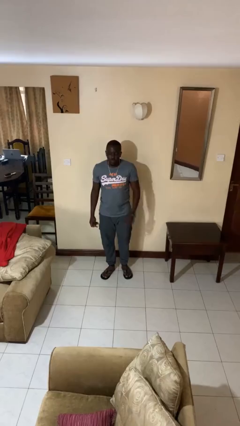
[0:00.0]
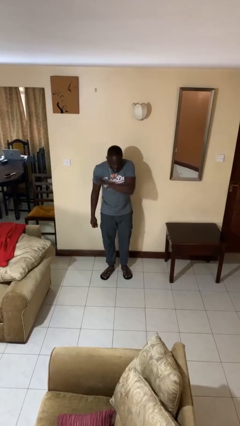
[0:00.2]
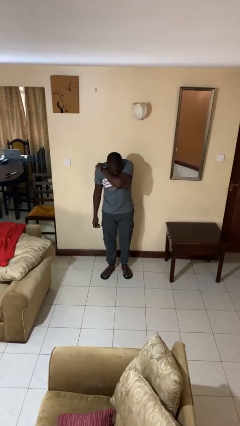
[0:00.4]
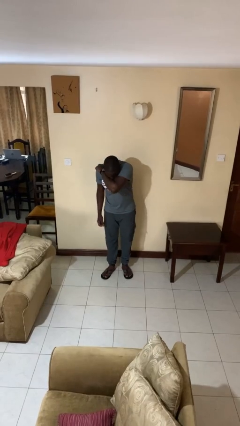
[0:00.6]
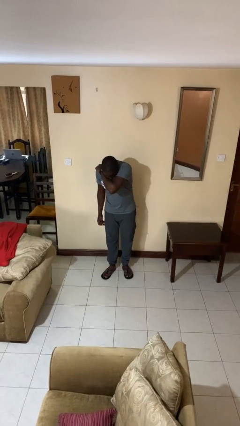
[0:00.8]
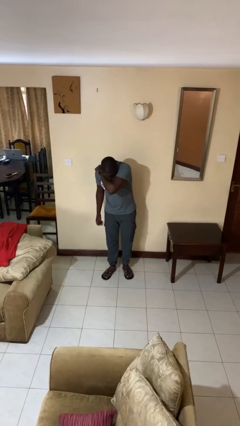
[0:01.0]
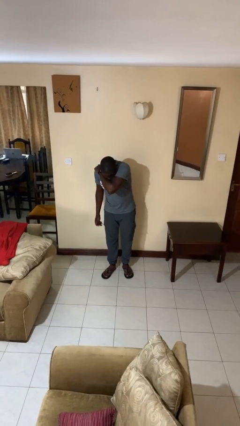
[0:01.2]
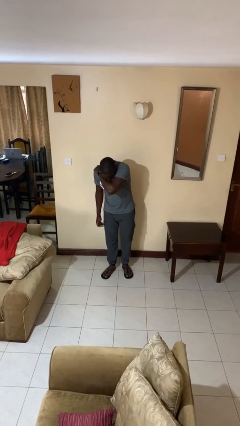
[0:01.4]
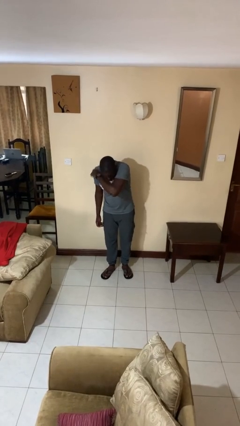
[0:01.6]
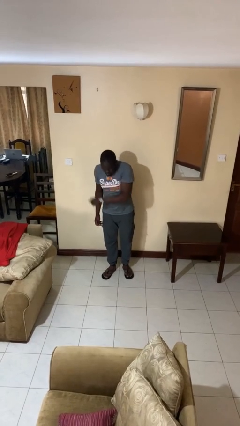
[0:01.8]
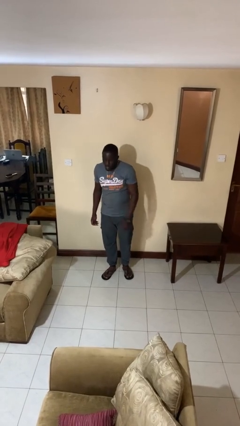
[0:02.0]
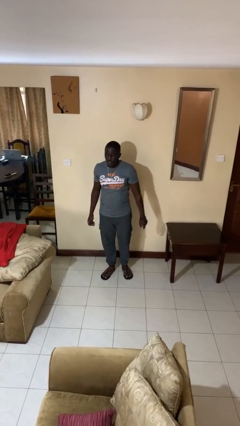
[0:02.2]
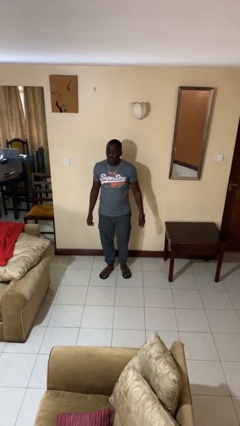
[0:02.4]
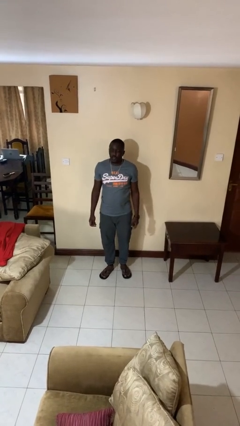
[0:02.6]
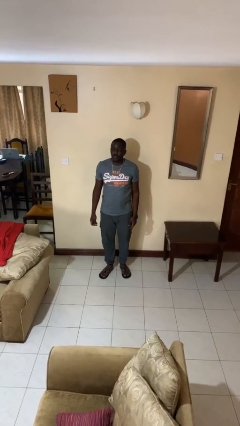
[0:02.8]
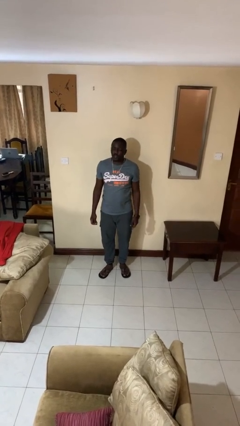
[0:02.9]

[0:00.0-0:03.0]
person sneezes into arm

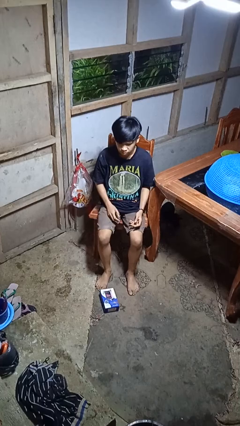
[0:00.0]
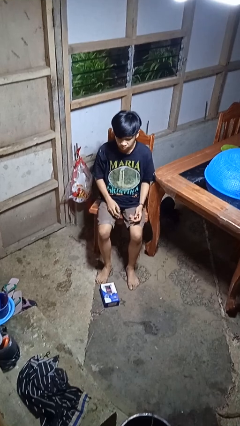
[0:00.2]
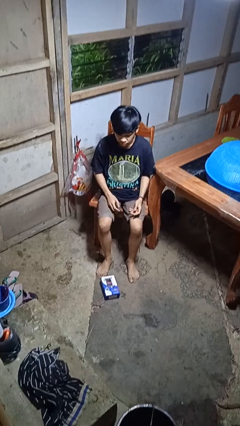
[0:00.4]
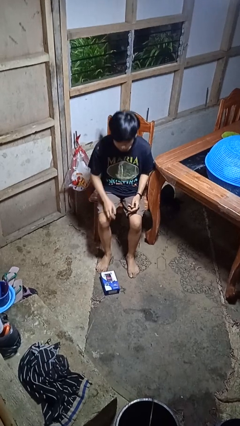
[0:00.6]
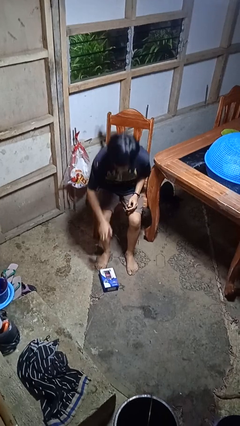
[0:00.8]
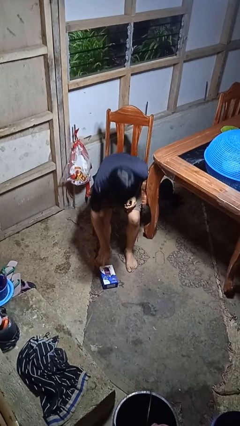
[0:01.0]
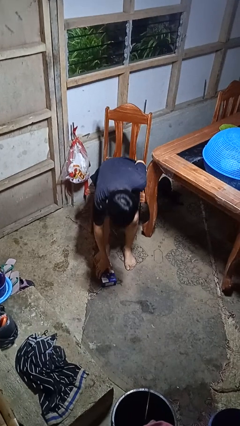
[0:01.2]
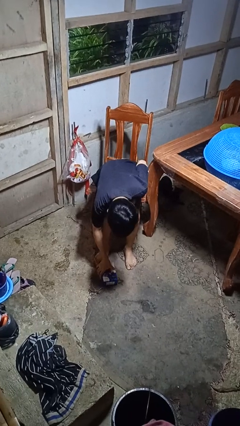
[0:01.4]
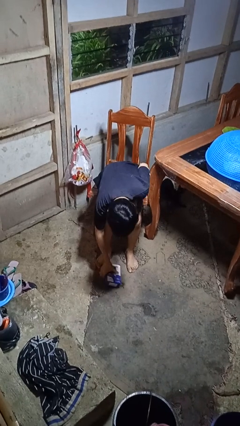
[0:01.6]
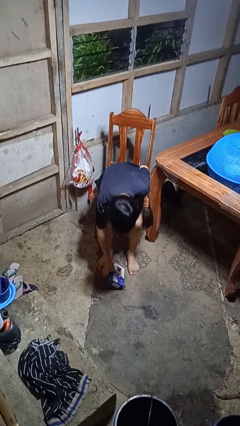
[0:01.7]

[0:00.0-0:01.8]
person picks up object from floor

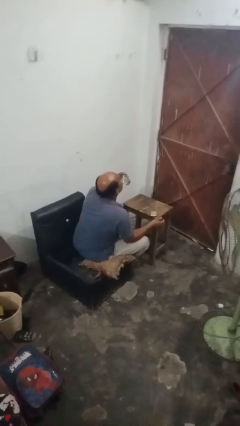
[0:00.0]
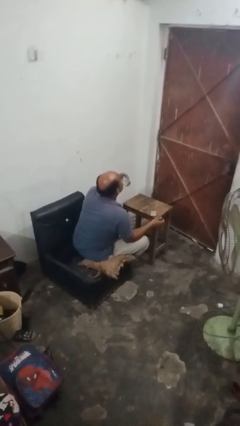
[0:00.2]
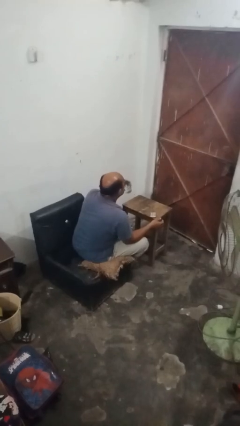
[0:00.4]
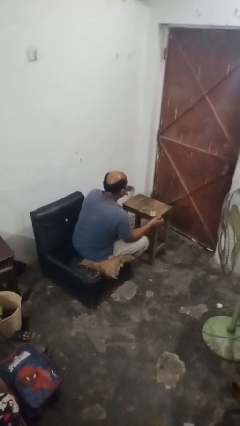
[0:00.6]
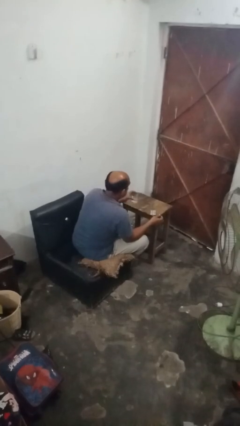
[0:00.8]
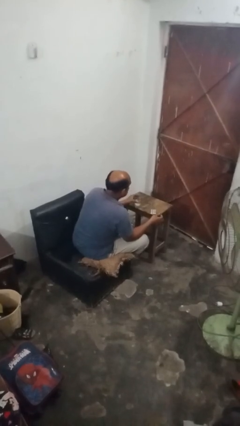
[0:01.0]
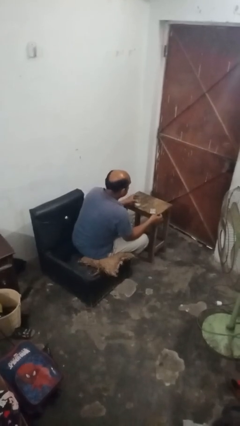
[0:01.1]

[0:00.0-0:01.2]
person drinks from cup

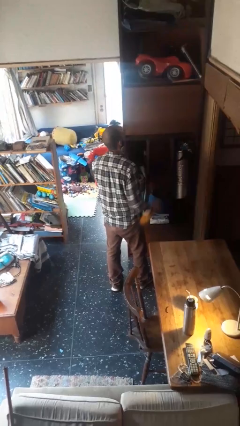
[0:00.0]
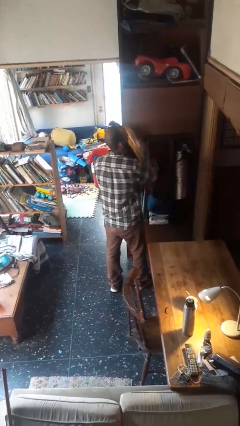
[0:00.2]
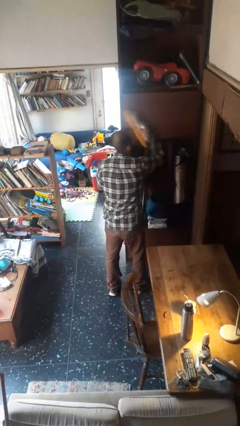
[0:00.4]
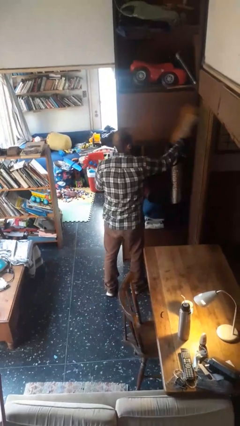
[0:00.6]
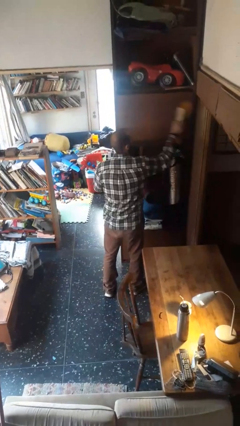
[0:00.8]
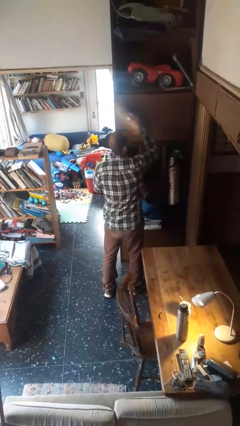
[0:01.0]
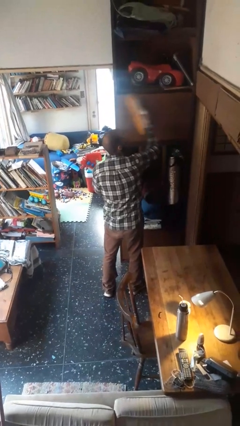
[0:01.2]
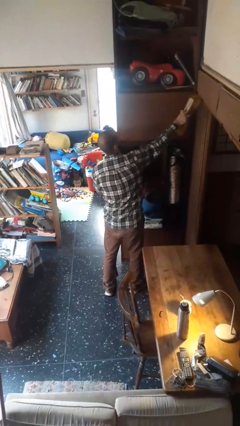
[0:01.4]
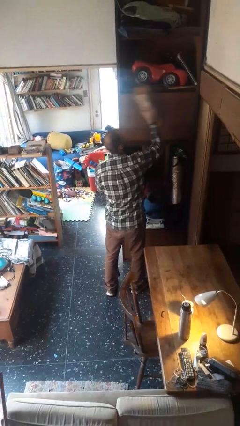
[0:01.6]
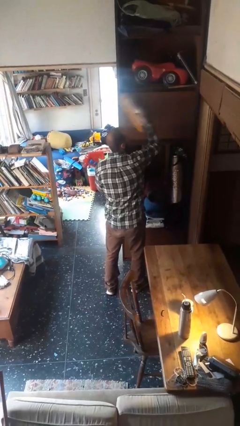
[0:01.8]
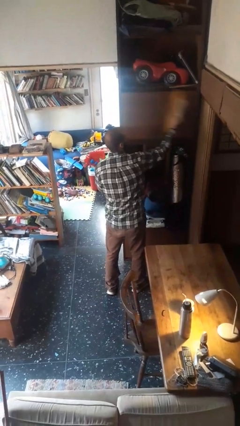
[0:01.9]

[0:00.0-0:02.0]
person dusts furniture

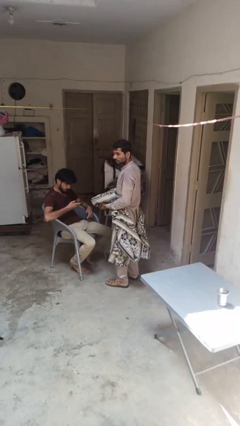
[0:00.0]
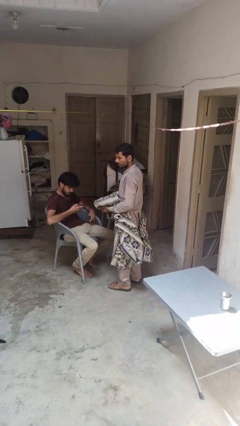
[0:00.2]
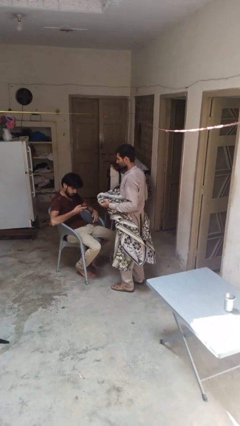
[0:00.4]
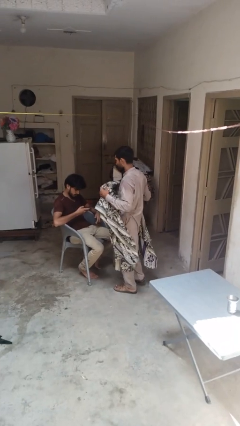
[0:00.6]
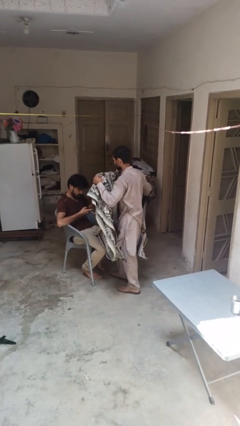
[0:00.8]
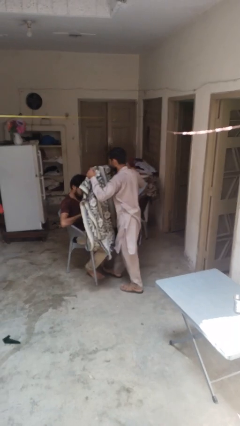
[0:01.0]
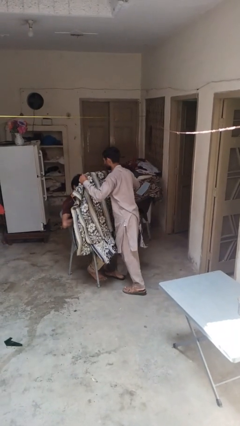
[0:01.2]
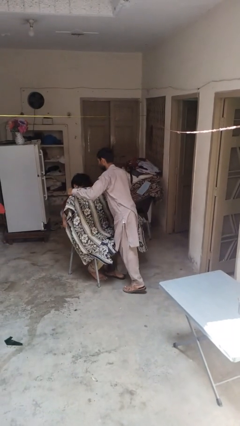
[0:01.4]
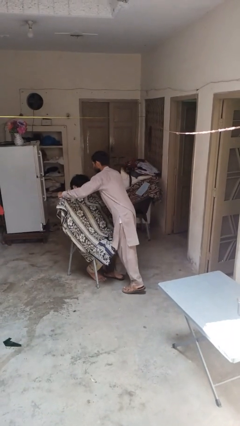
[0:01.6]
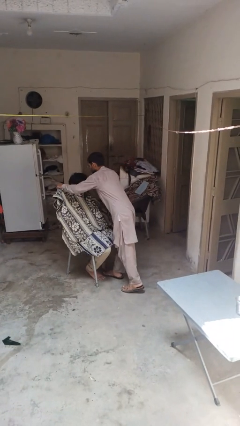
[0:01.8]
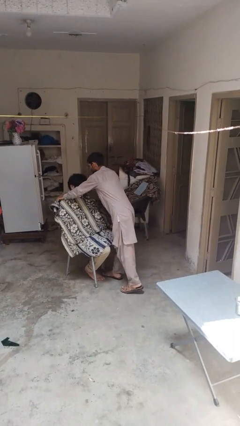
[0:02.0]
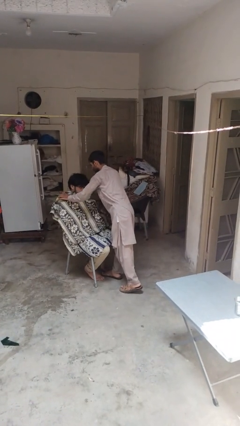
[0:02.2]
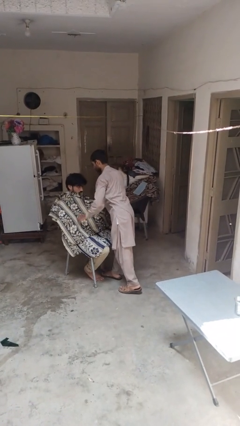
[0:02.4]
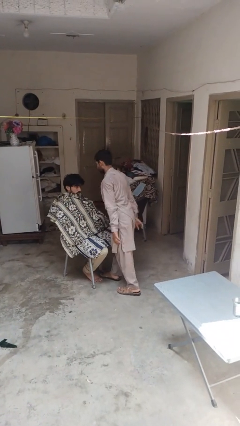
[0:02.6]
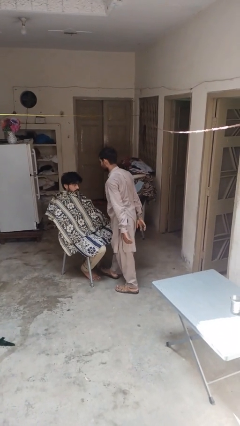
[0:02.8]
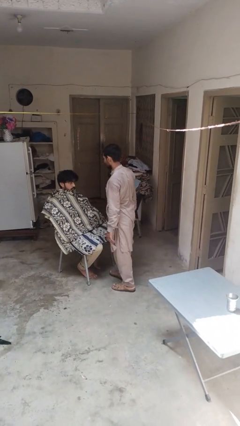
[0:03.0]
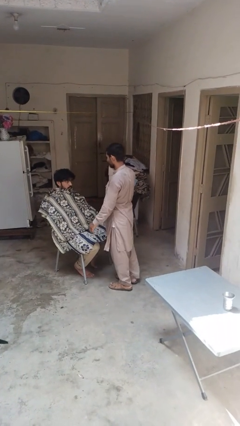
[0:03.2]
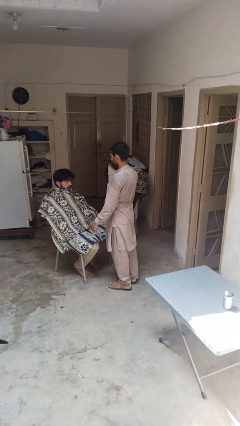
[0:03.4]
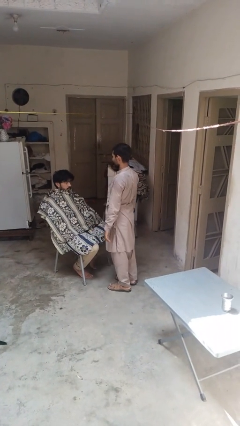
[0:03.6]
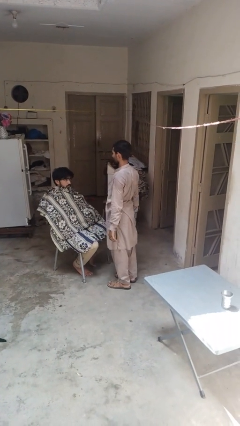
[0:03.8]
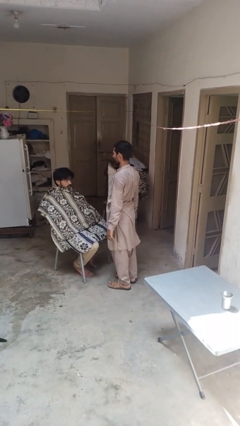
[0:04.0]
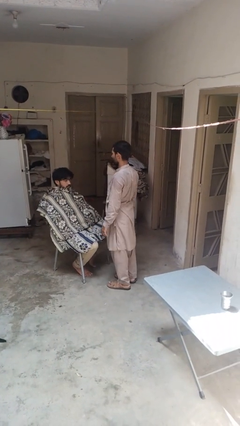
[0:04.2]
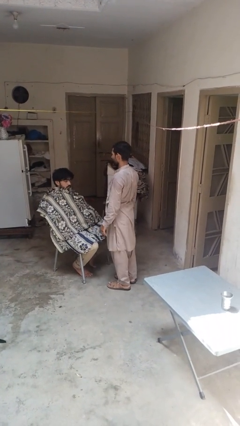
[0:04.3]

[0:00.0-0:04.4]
person covers friend with blanket

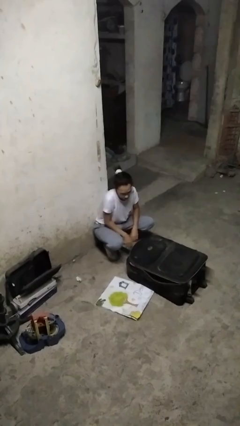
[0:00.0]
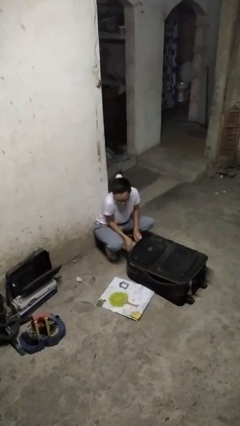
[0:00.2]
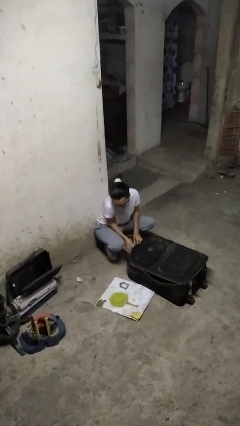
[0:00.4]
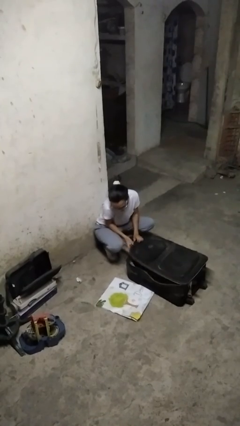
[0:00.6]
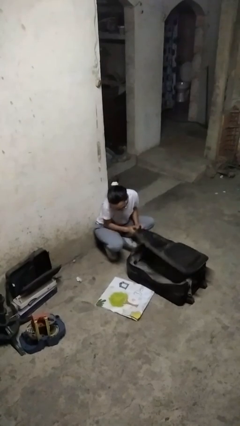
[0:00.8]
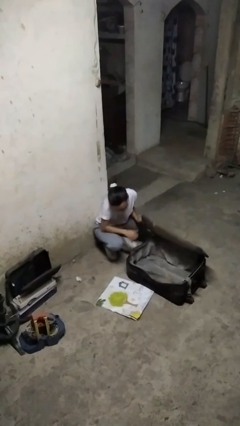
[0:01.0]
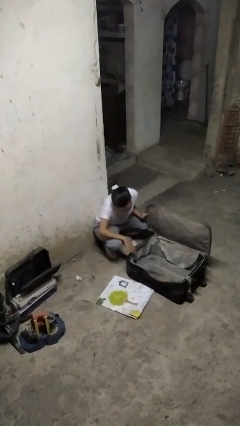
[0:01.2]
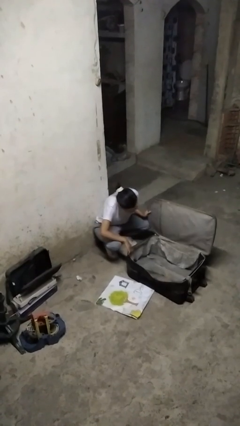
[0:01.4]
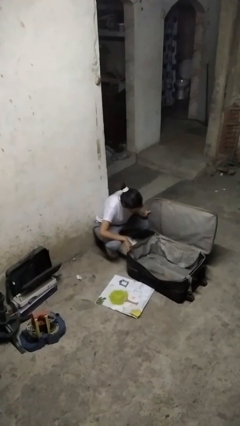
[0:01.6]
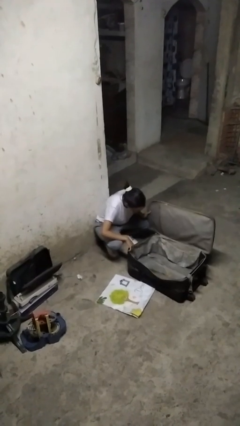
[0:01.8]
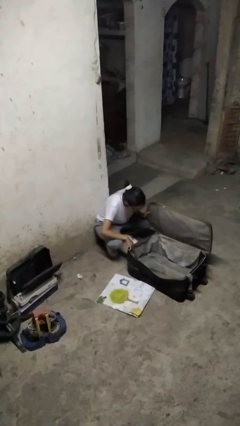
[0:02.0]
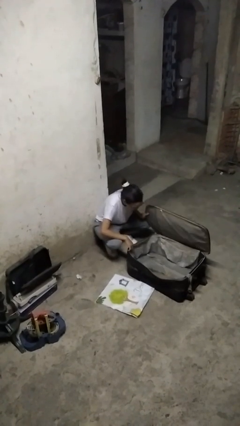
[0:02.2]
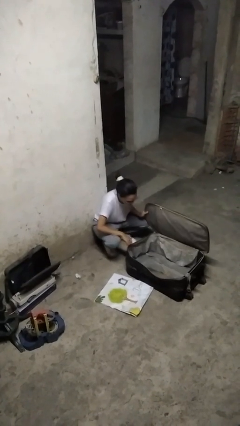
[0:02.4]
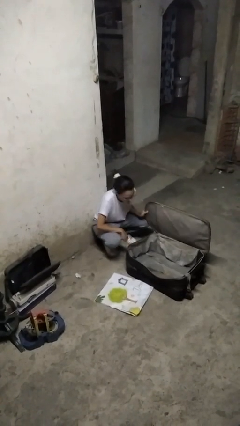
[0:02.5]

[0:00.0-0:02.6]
person opens suitcase

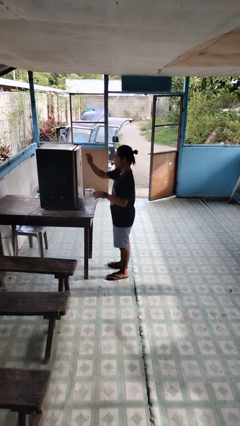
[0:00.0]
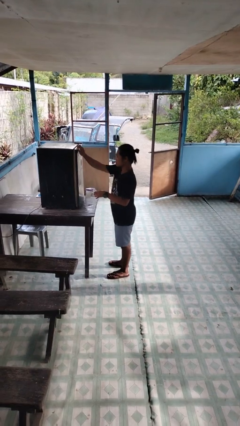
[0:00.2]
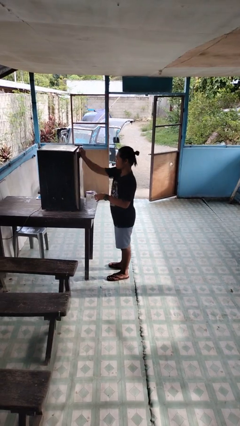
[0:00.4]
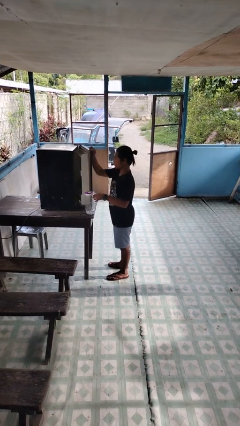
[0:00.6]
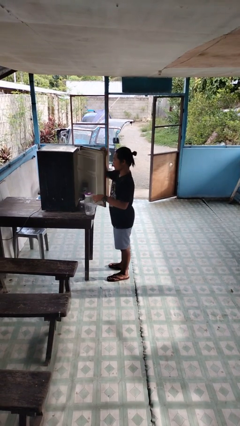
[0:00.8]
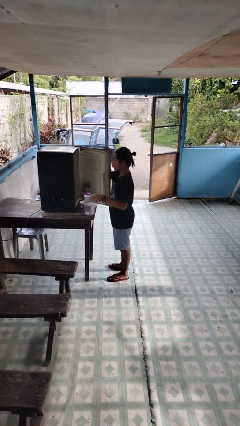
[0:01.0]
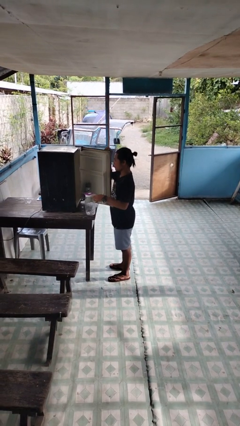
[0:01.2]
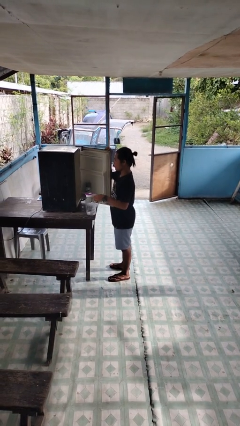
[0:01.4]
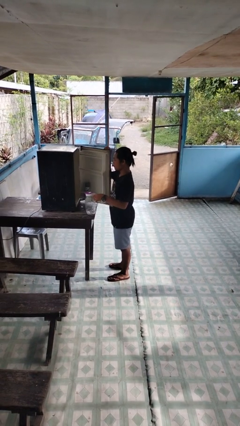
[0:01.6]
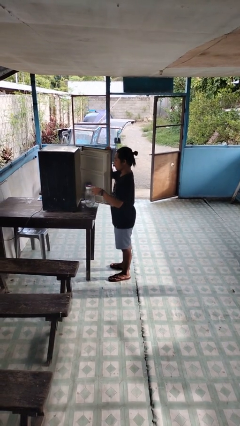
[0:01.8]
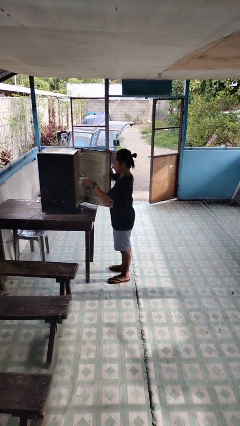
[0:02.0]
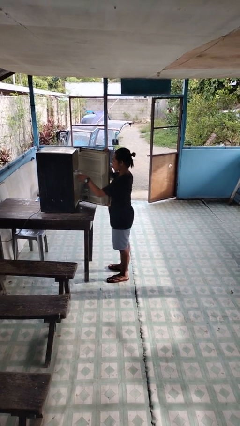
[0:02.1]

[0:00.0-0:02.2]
person opens refrigerator
